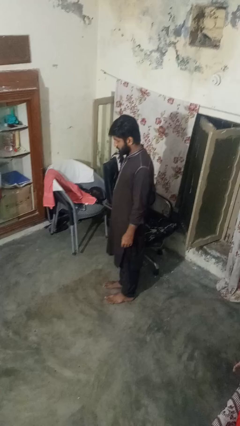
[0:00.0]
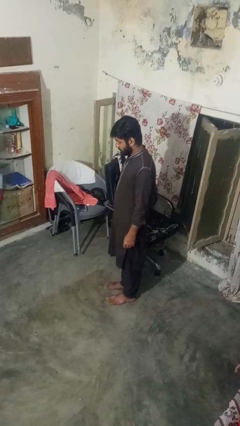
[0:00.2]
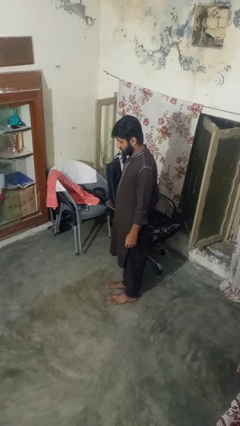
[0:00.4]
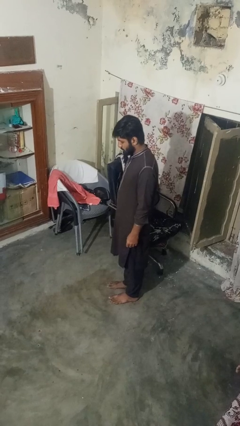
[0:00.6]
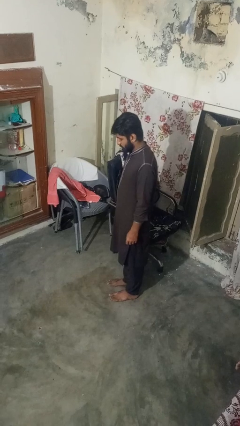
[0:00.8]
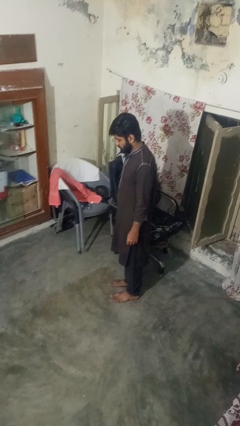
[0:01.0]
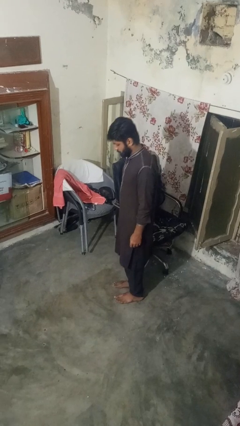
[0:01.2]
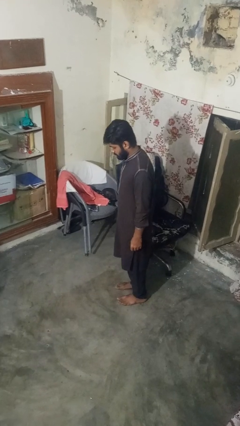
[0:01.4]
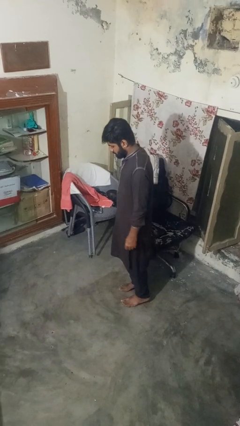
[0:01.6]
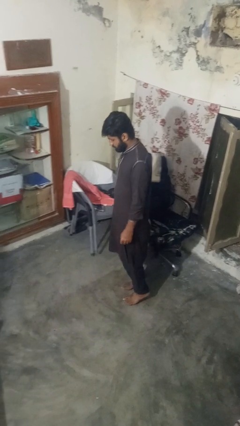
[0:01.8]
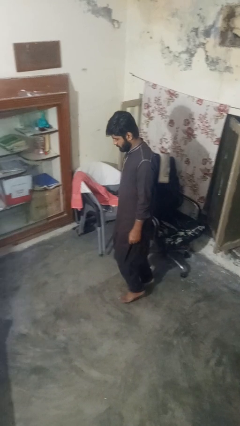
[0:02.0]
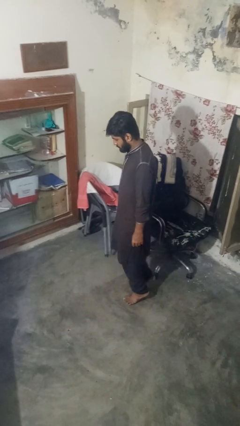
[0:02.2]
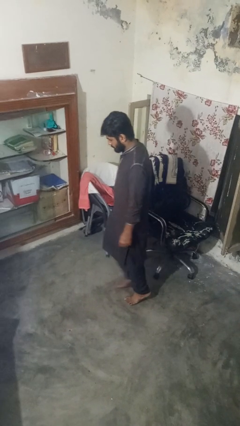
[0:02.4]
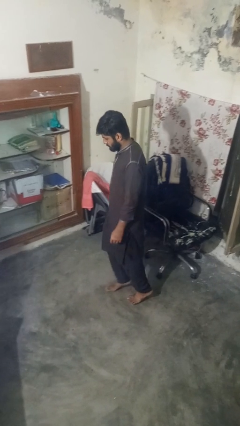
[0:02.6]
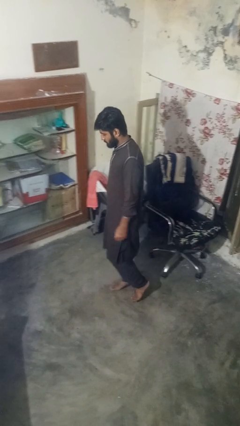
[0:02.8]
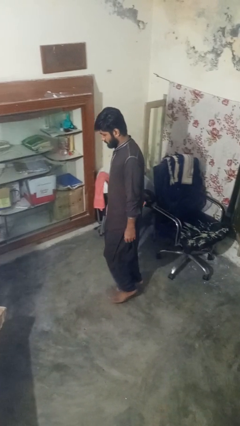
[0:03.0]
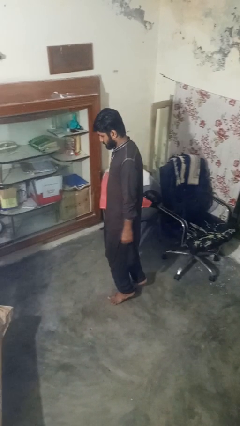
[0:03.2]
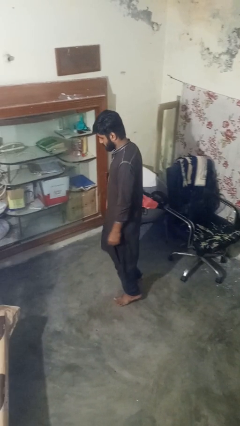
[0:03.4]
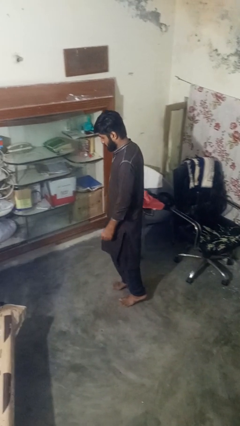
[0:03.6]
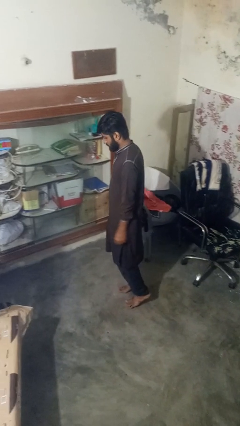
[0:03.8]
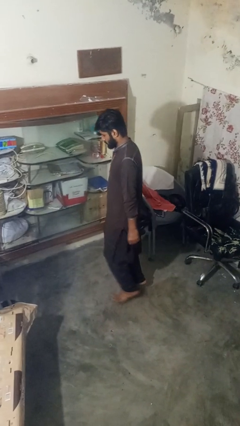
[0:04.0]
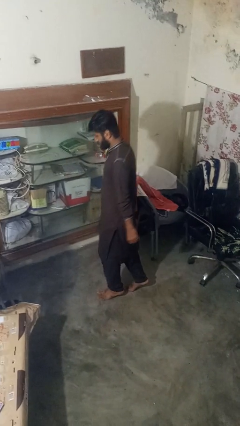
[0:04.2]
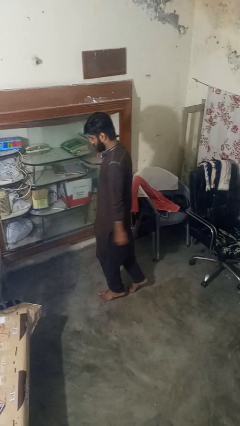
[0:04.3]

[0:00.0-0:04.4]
person walks tiptoe

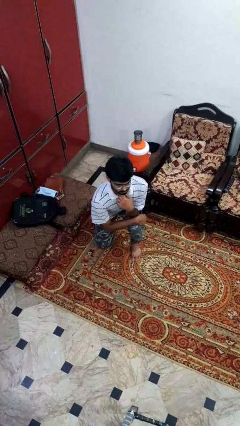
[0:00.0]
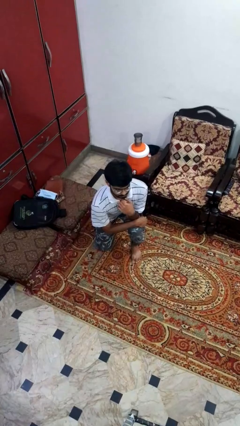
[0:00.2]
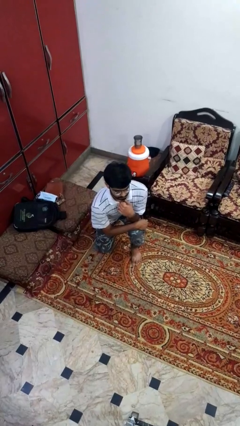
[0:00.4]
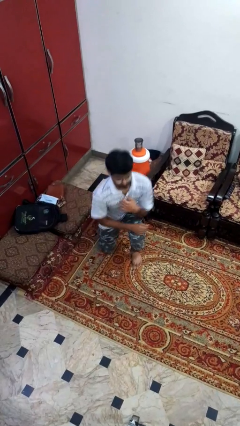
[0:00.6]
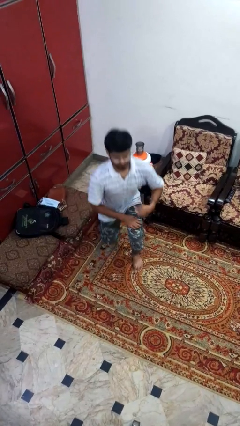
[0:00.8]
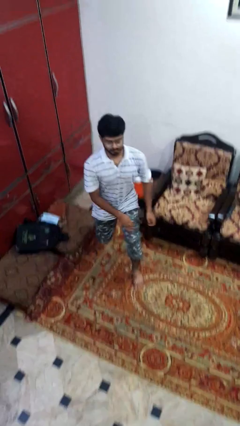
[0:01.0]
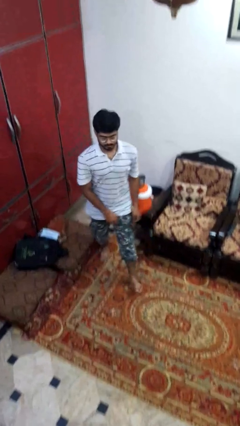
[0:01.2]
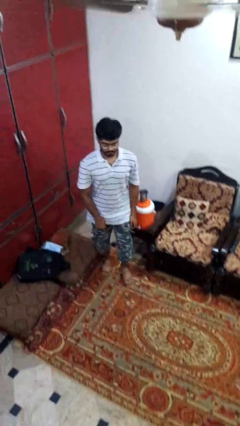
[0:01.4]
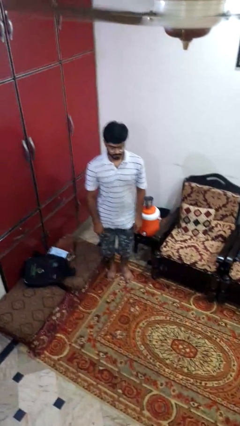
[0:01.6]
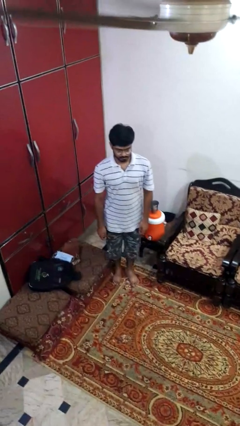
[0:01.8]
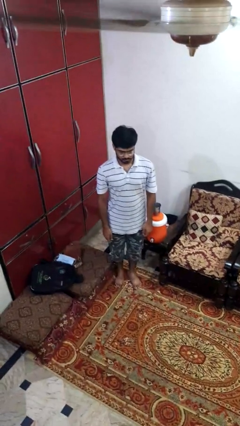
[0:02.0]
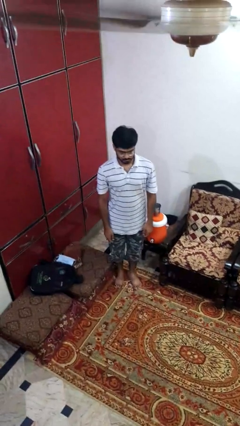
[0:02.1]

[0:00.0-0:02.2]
person stands up from floor

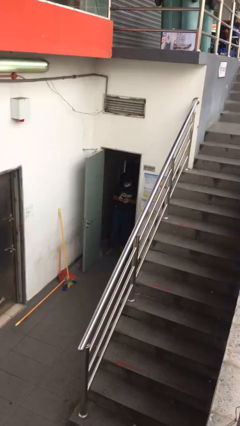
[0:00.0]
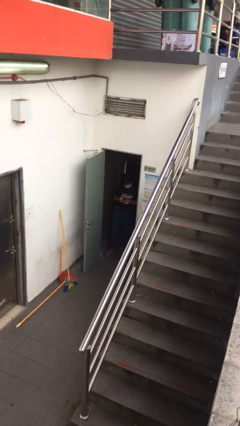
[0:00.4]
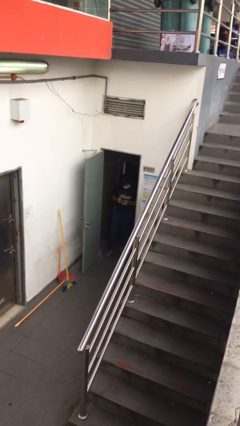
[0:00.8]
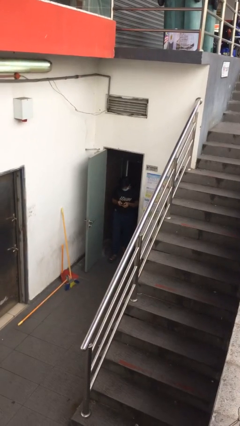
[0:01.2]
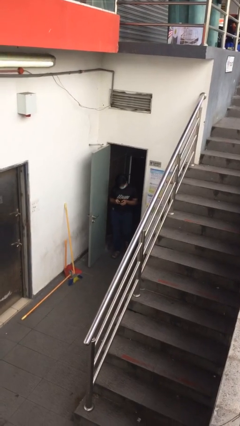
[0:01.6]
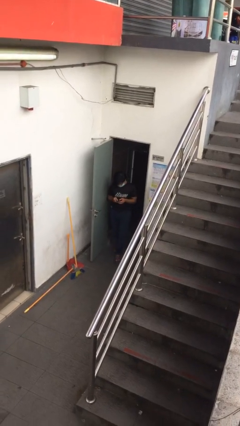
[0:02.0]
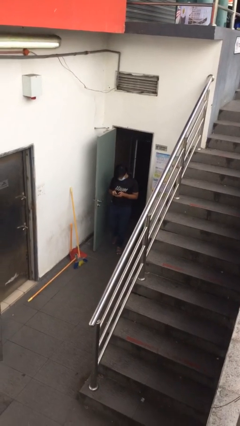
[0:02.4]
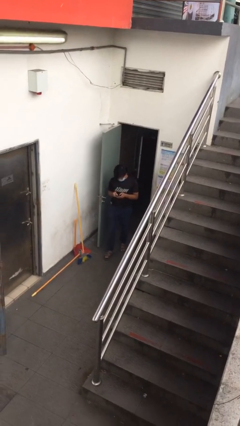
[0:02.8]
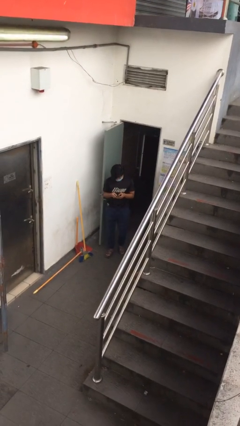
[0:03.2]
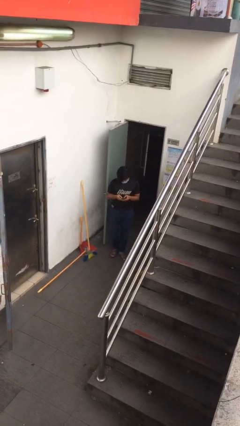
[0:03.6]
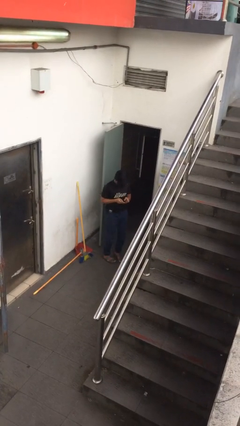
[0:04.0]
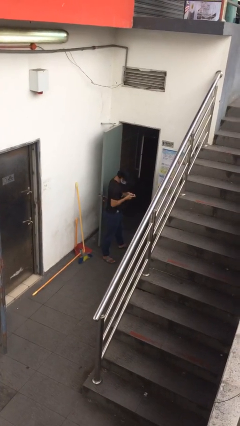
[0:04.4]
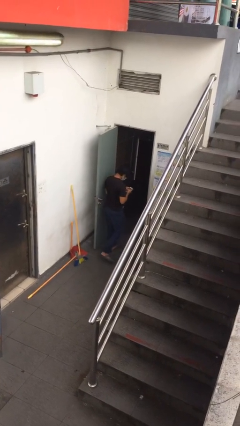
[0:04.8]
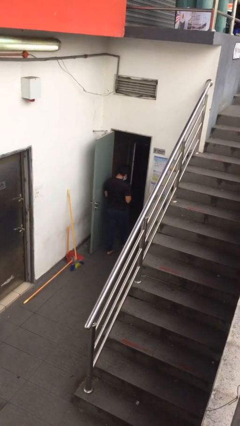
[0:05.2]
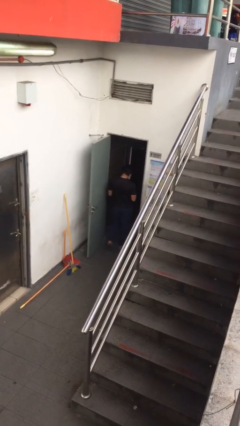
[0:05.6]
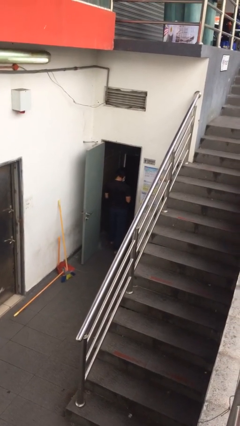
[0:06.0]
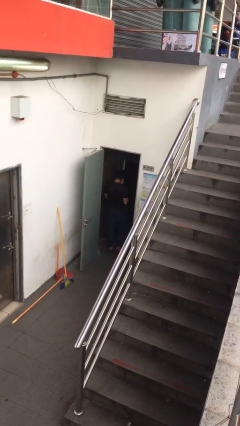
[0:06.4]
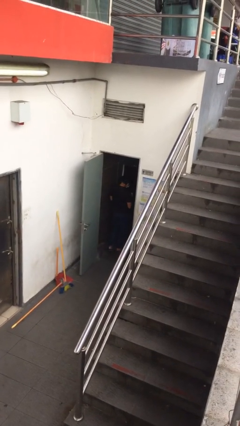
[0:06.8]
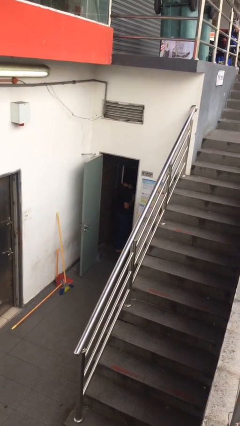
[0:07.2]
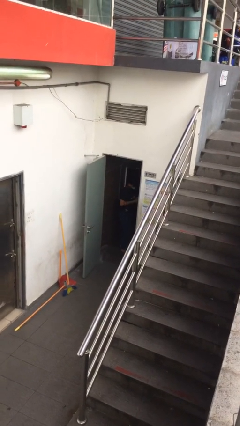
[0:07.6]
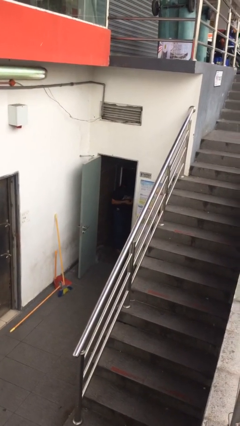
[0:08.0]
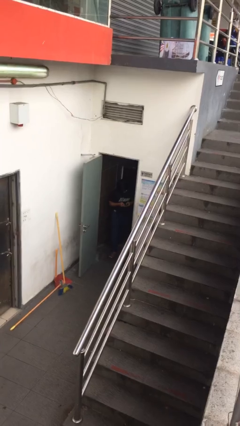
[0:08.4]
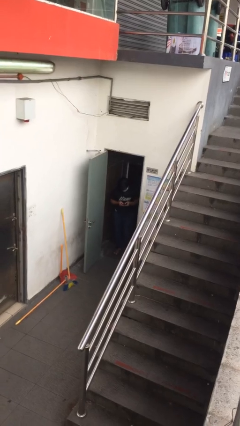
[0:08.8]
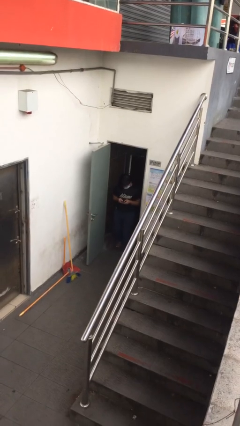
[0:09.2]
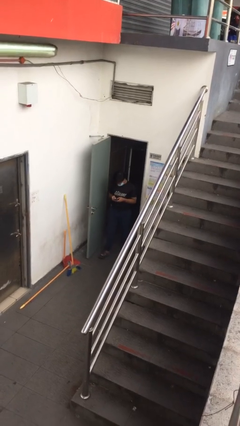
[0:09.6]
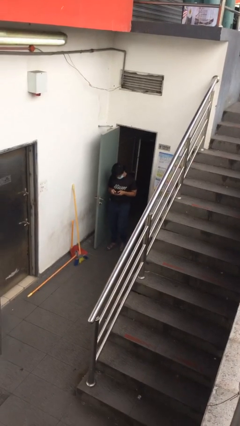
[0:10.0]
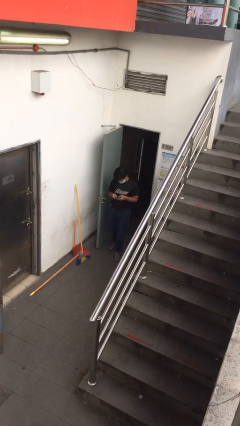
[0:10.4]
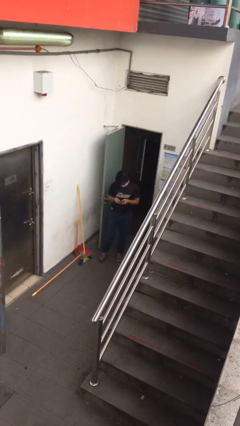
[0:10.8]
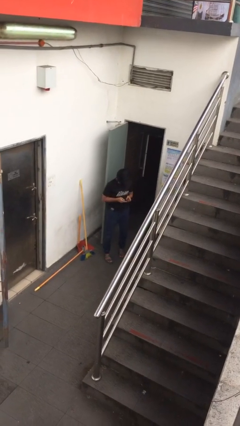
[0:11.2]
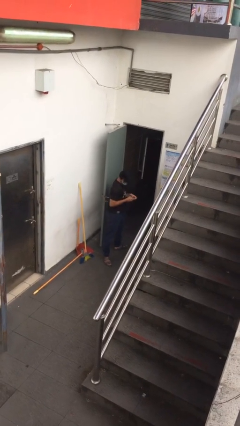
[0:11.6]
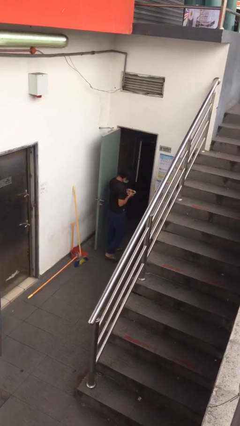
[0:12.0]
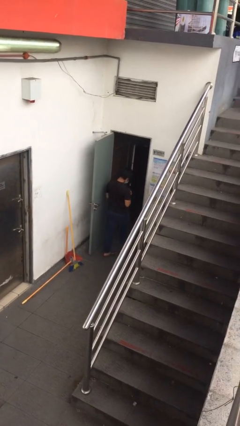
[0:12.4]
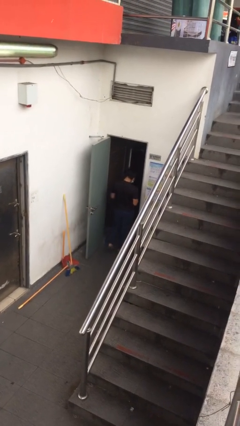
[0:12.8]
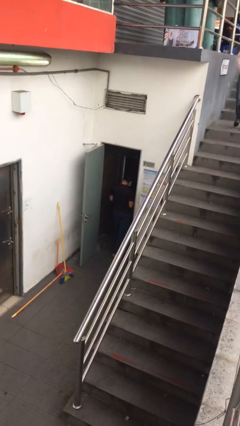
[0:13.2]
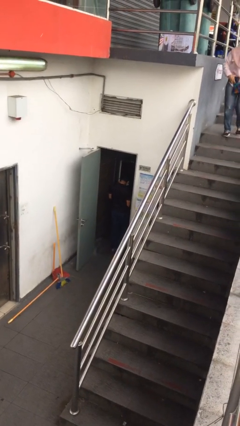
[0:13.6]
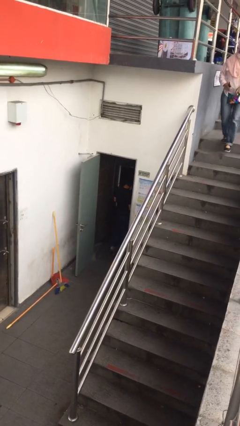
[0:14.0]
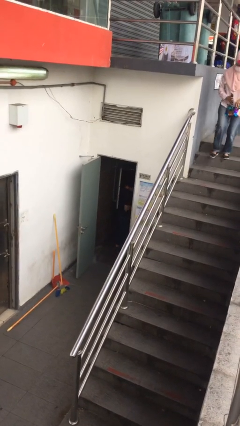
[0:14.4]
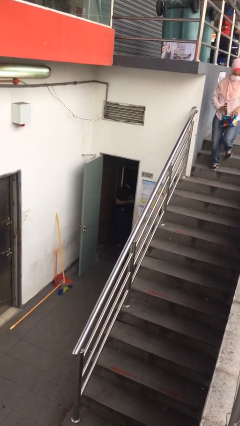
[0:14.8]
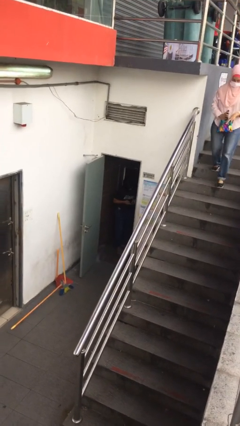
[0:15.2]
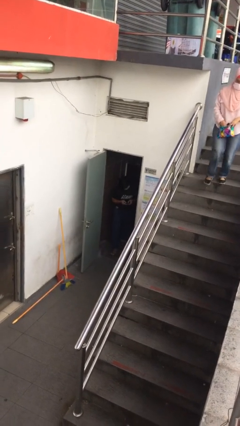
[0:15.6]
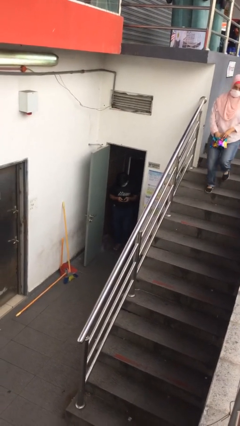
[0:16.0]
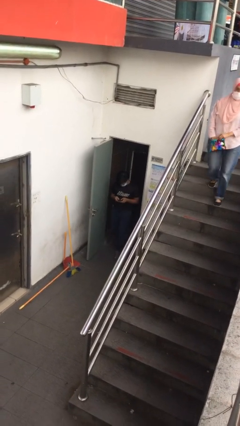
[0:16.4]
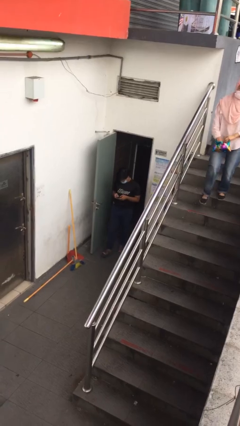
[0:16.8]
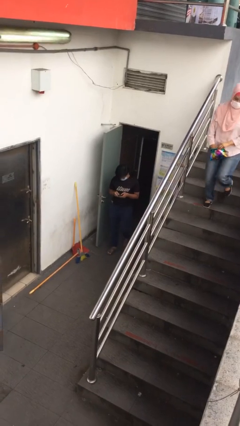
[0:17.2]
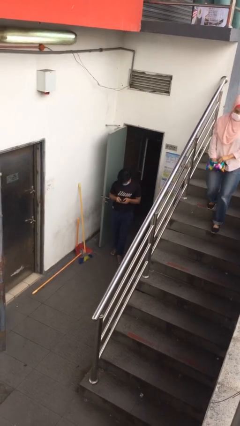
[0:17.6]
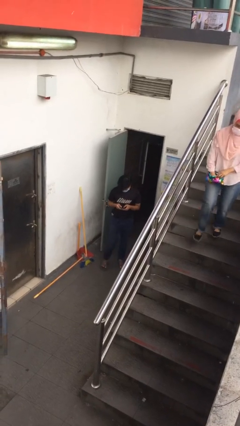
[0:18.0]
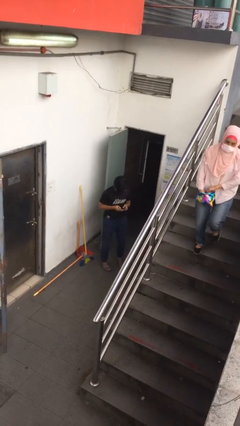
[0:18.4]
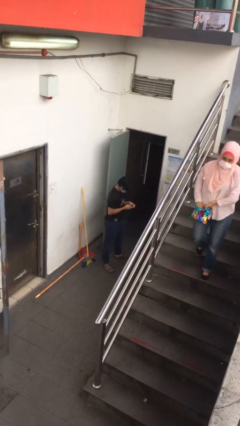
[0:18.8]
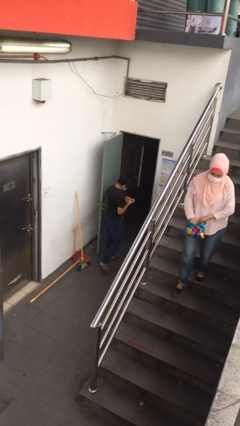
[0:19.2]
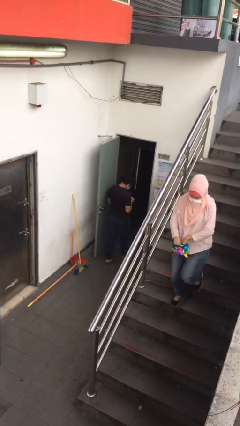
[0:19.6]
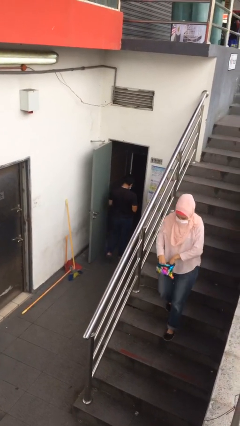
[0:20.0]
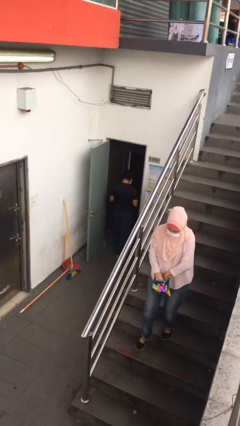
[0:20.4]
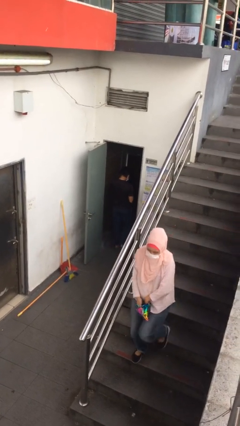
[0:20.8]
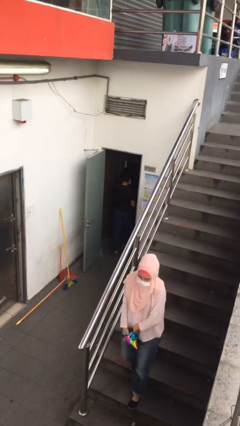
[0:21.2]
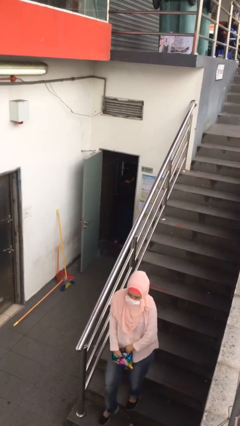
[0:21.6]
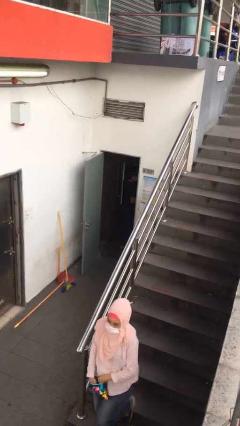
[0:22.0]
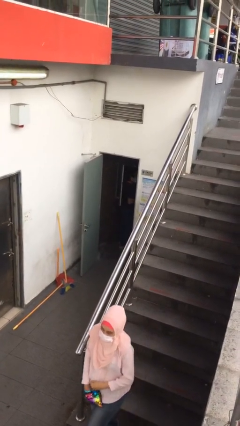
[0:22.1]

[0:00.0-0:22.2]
person texts on phone

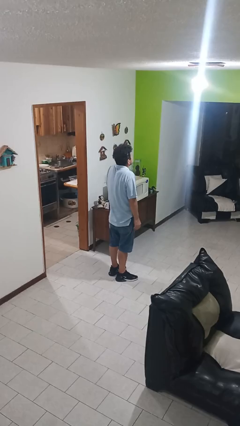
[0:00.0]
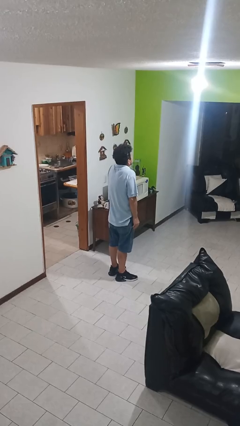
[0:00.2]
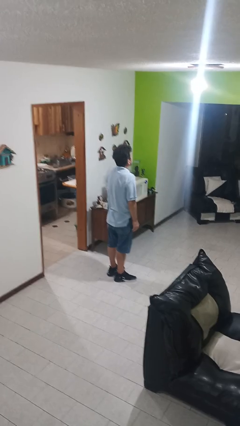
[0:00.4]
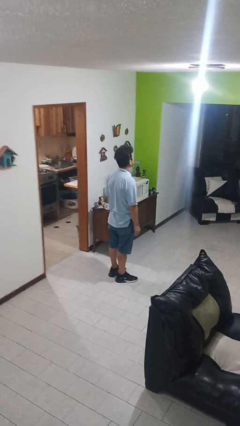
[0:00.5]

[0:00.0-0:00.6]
person shrugs
